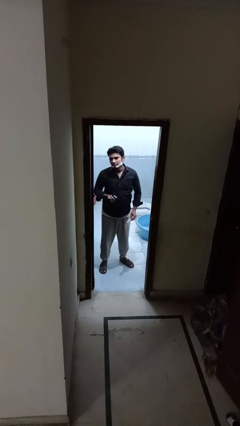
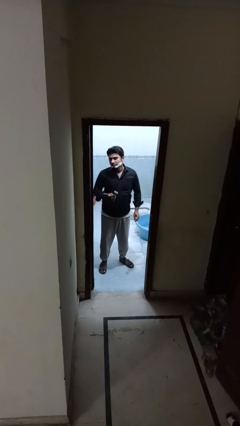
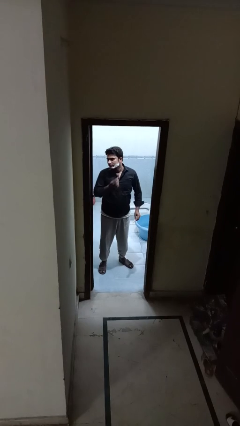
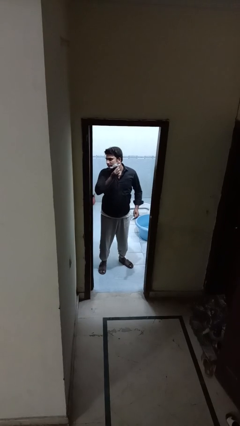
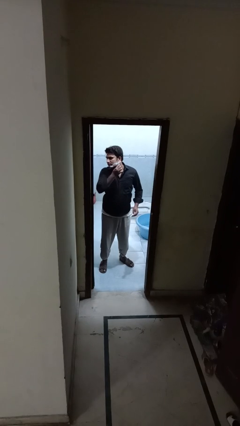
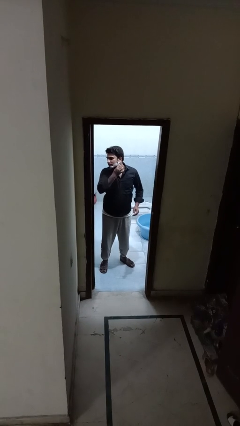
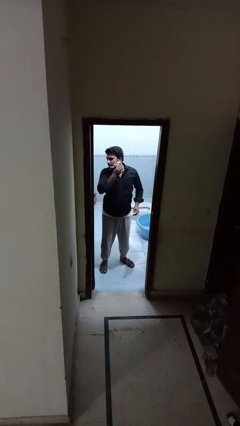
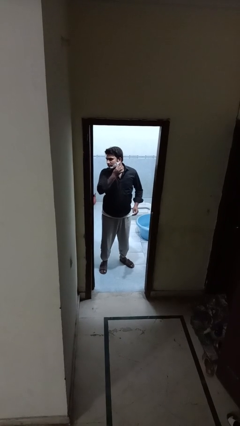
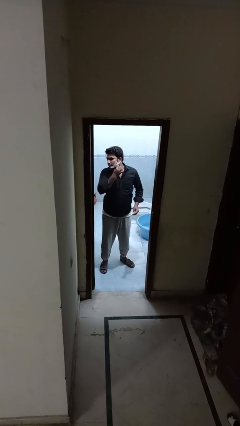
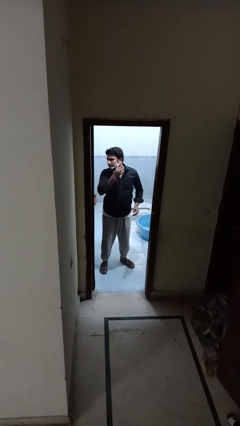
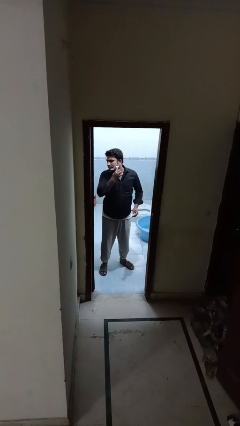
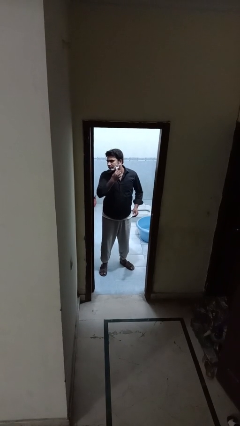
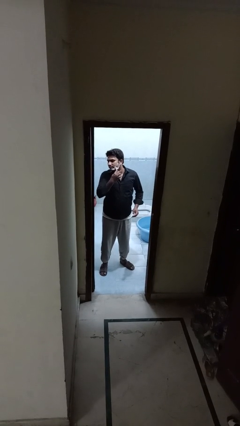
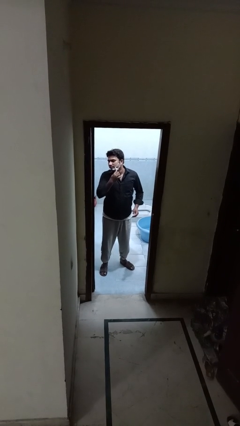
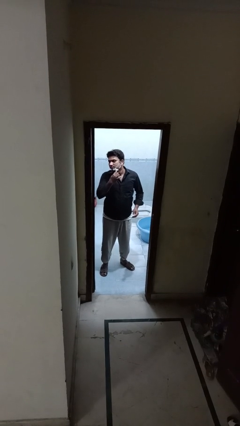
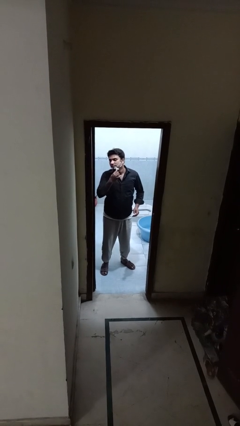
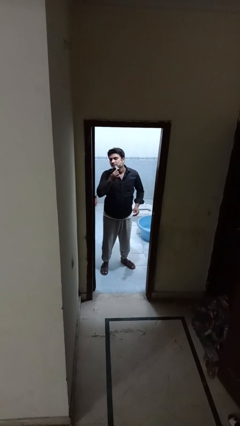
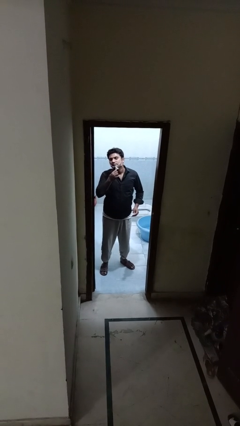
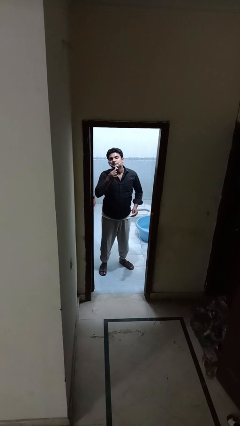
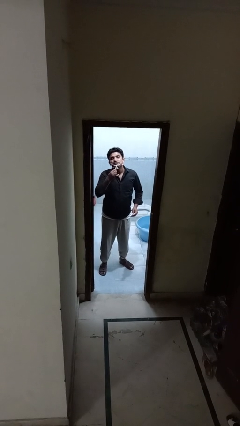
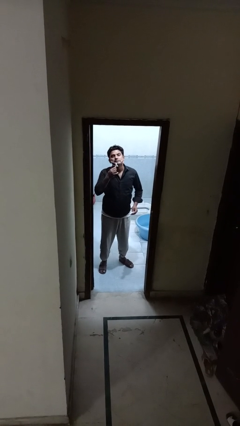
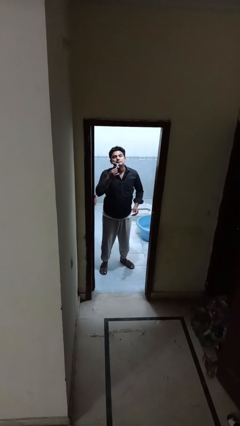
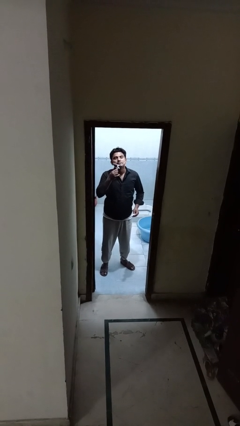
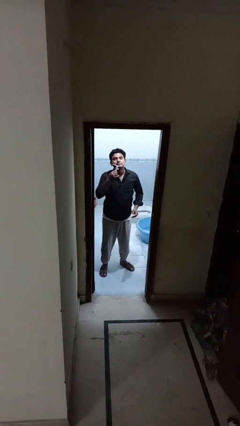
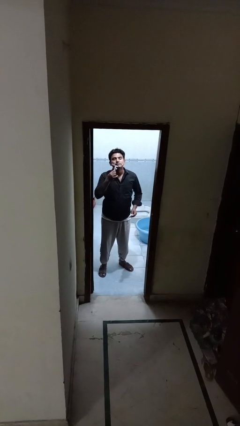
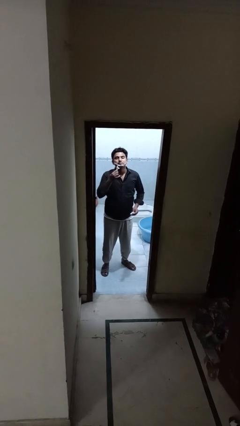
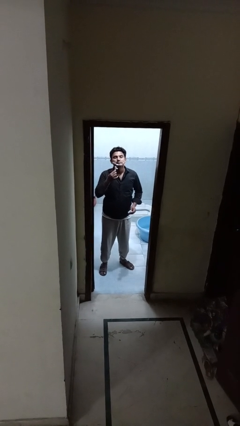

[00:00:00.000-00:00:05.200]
person shaves face

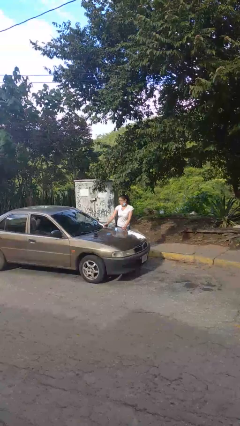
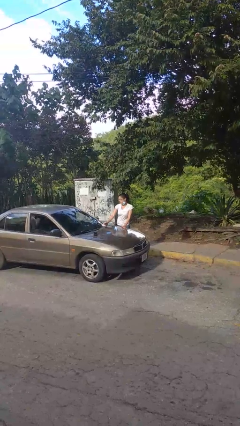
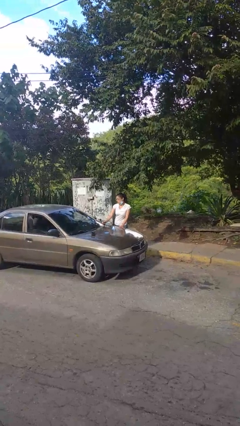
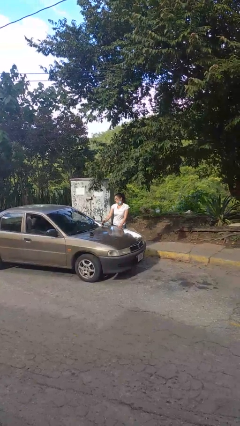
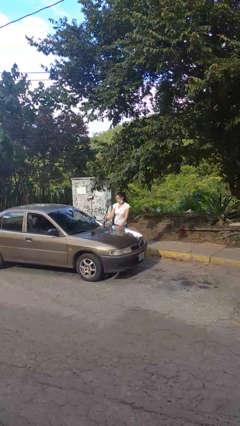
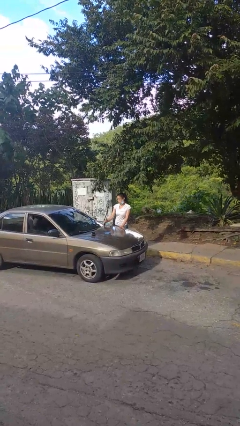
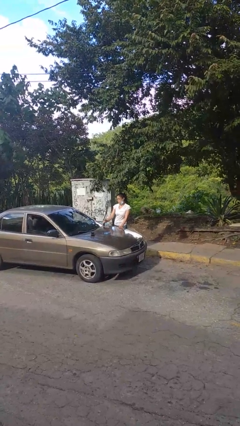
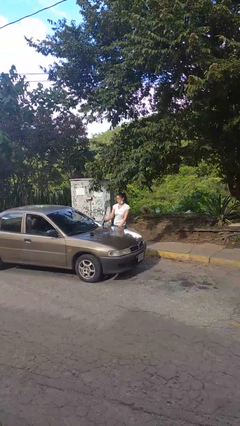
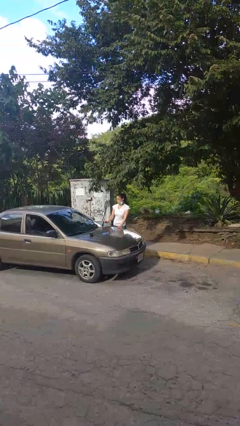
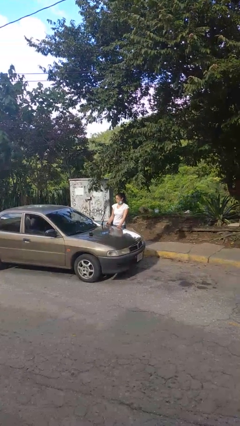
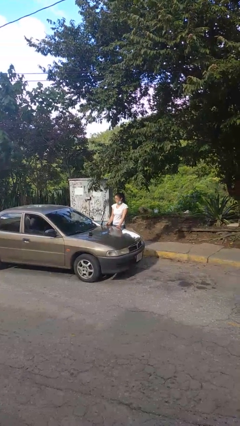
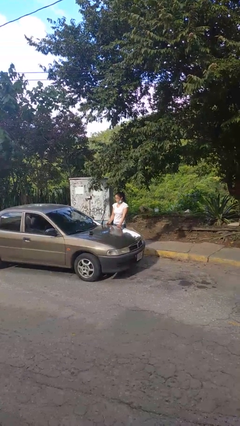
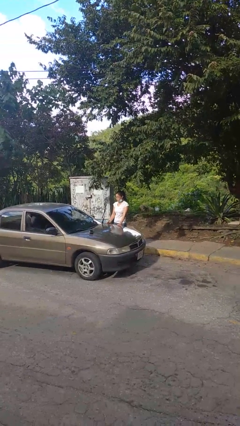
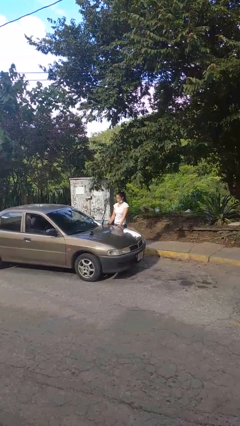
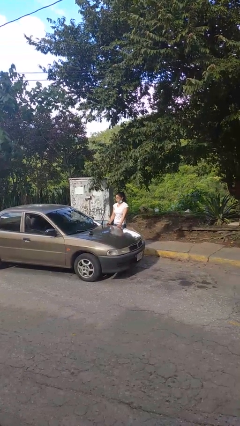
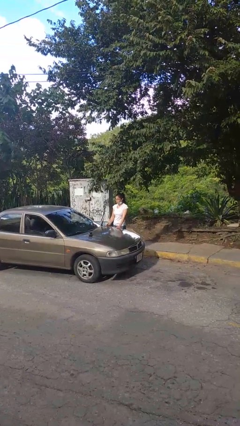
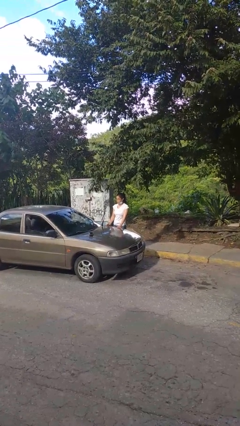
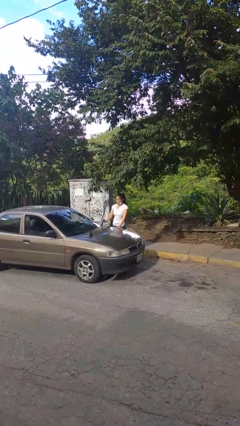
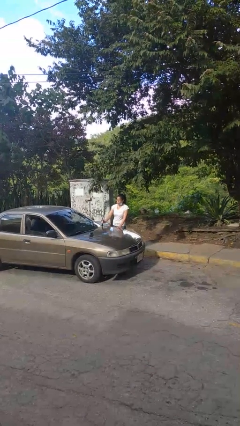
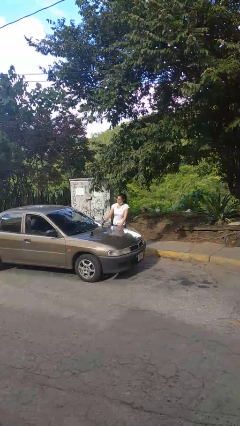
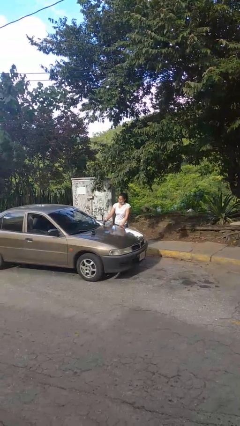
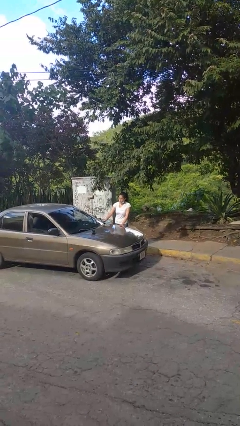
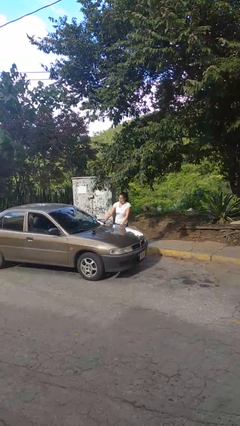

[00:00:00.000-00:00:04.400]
person flips up car wipers

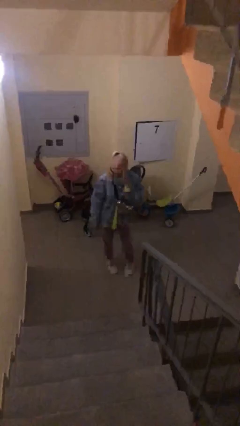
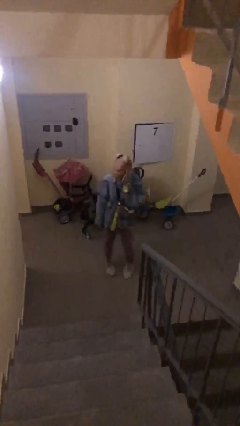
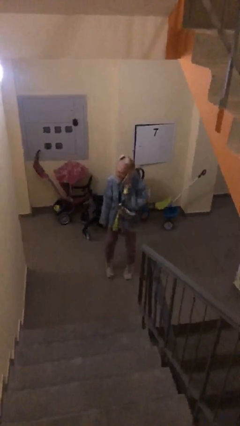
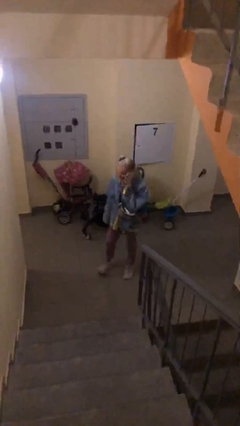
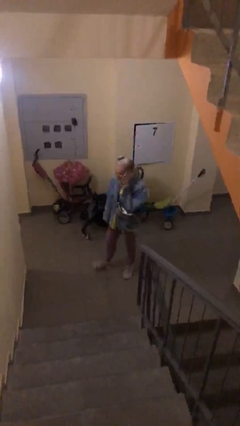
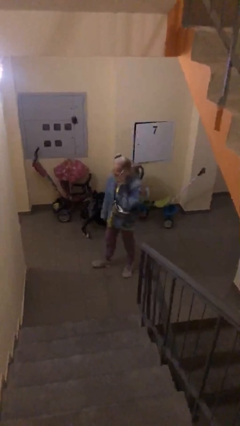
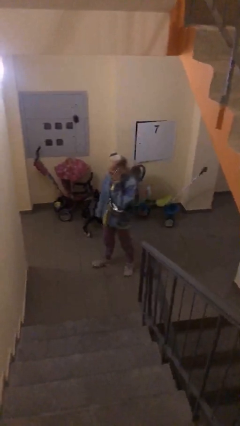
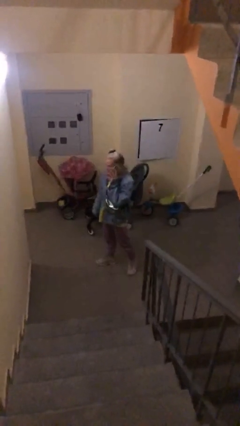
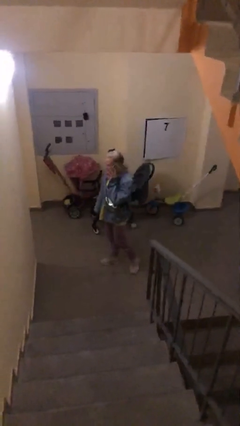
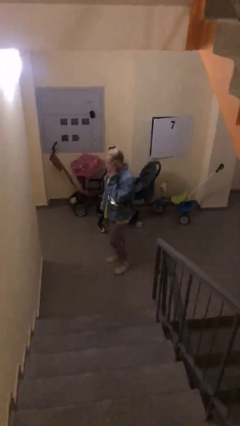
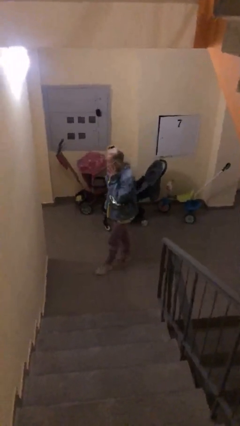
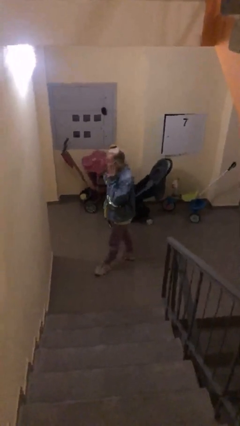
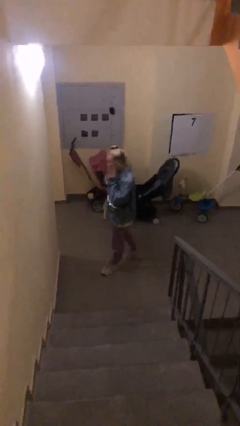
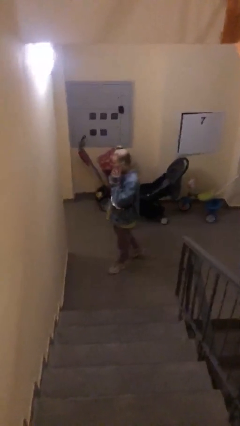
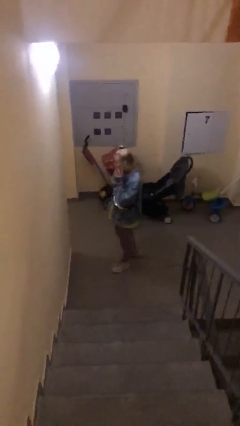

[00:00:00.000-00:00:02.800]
person talks on phone

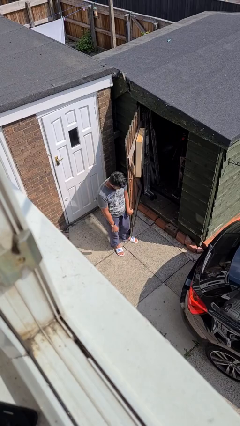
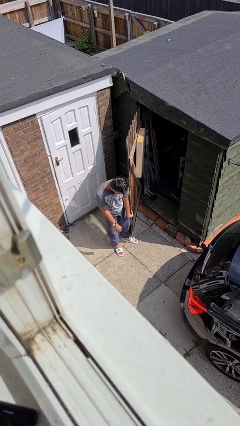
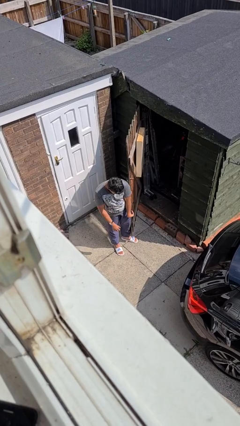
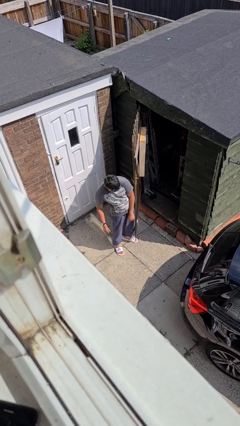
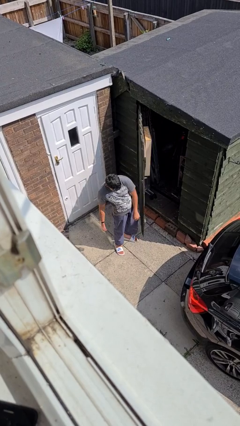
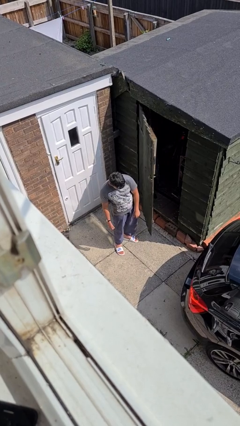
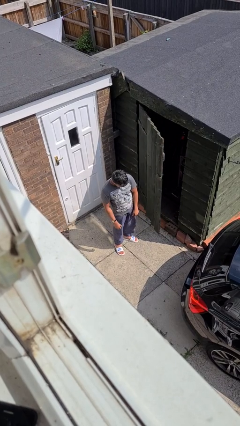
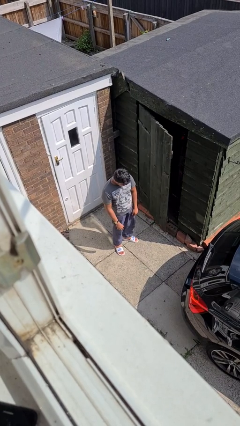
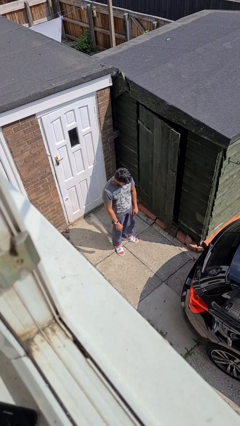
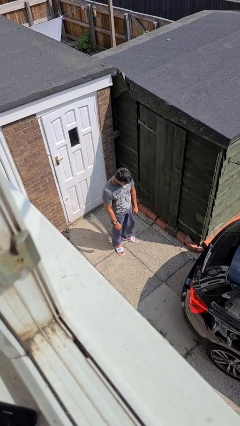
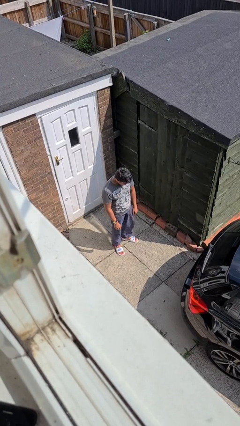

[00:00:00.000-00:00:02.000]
person closes door with hip

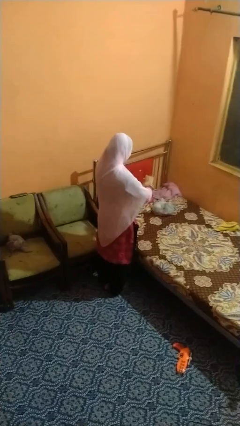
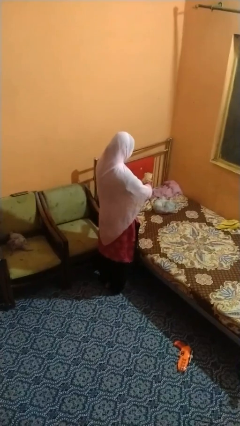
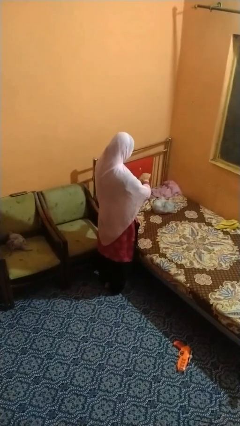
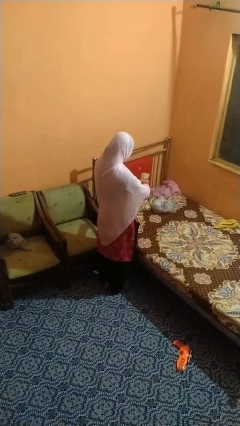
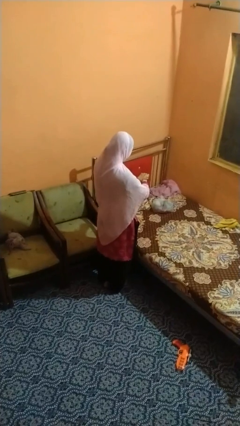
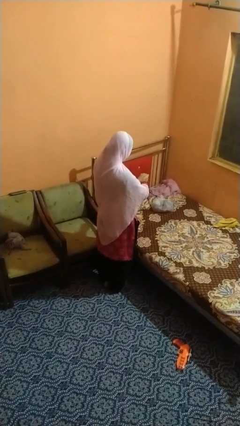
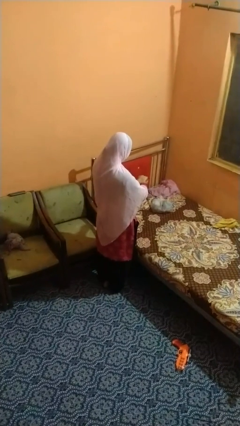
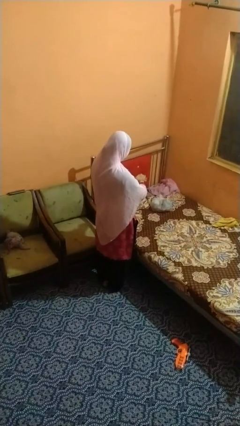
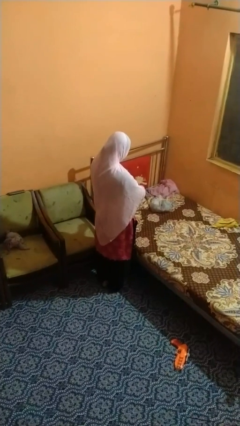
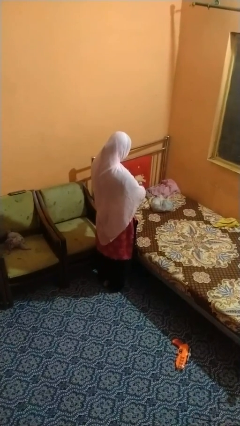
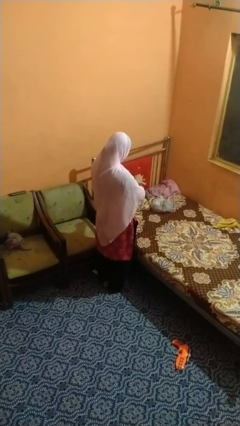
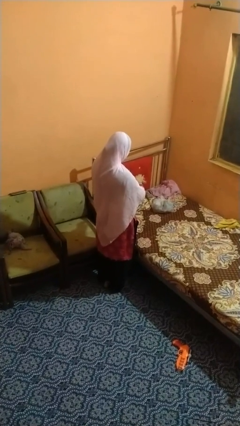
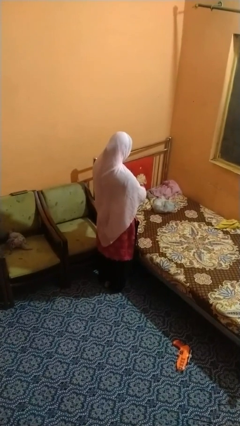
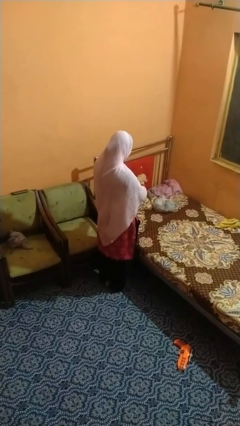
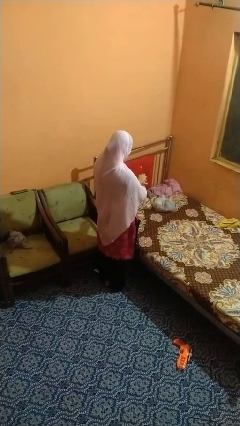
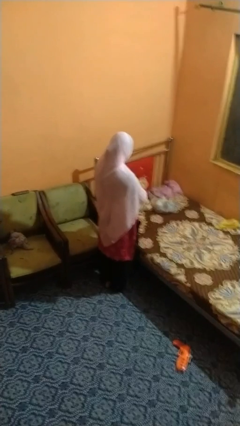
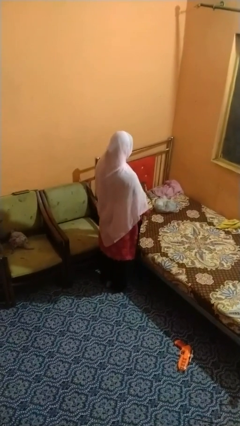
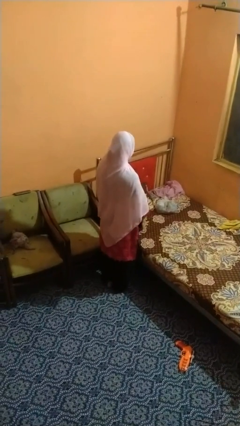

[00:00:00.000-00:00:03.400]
person swats bug
